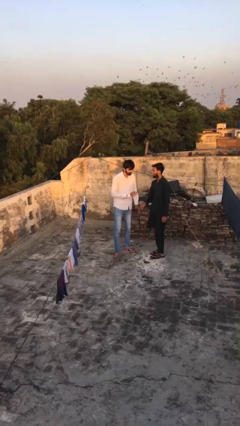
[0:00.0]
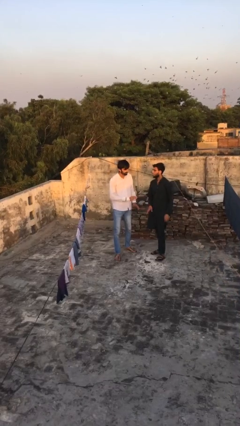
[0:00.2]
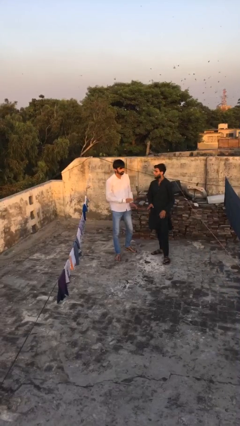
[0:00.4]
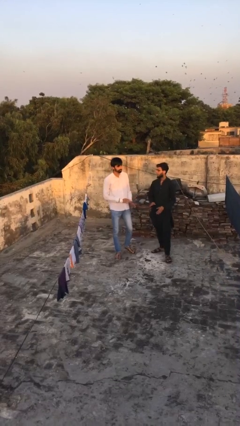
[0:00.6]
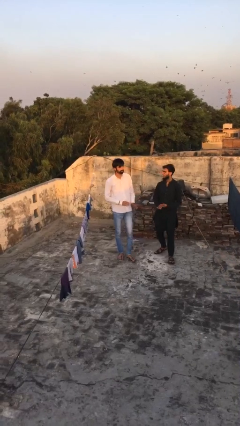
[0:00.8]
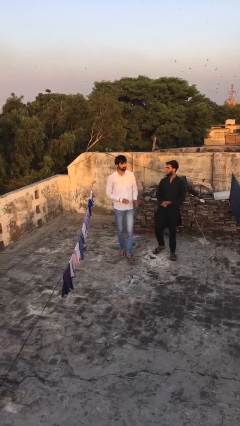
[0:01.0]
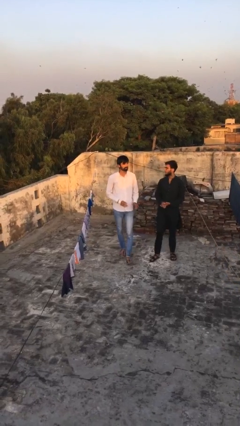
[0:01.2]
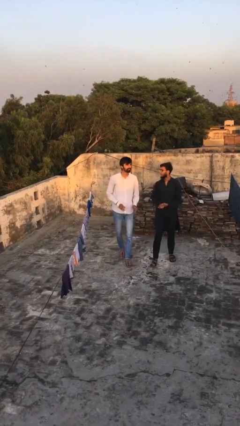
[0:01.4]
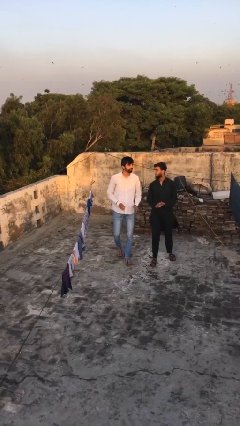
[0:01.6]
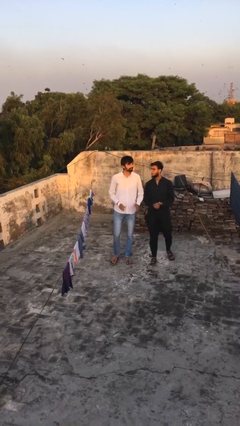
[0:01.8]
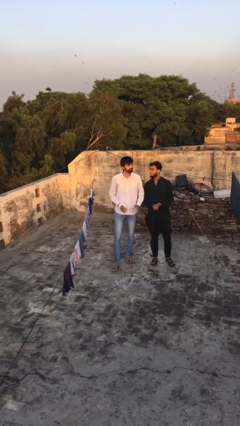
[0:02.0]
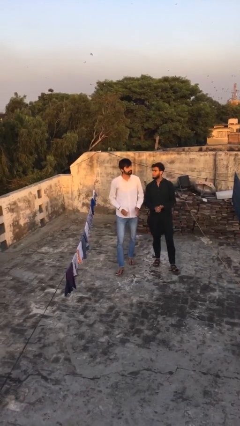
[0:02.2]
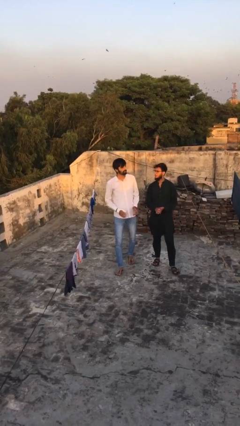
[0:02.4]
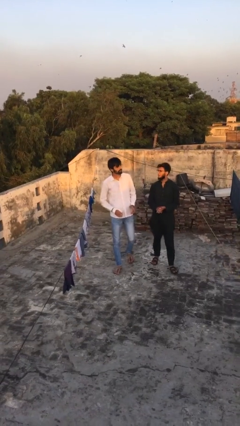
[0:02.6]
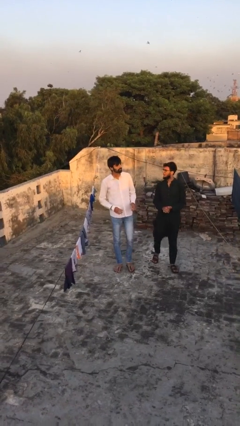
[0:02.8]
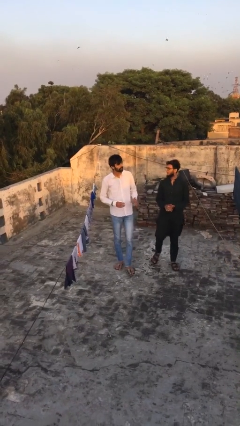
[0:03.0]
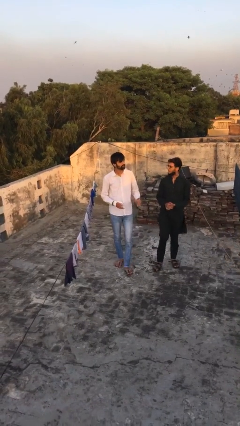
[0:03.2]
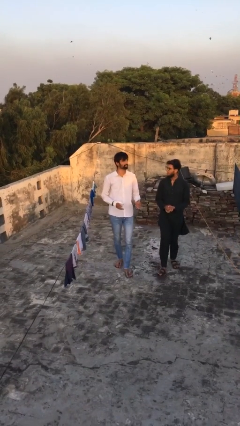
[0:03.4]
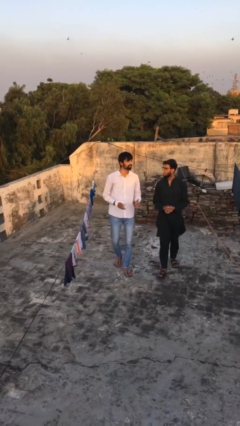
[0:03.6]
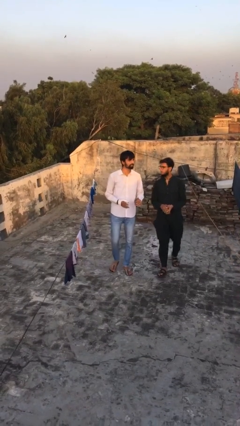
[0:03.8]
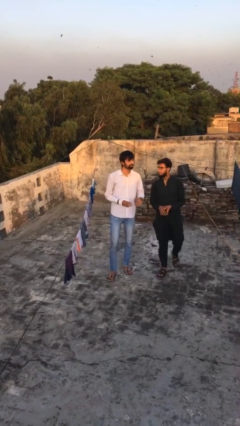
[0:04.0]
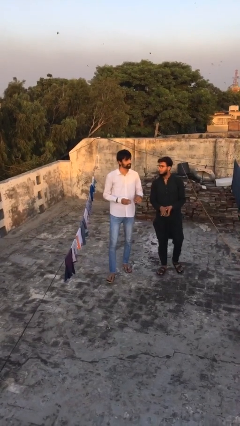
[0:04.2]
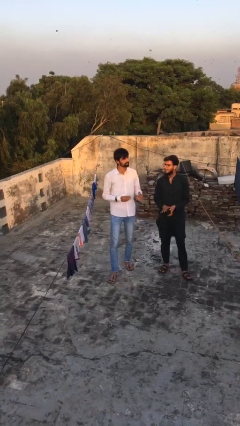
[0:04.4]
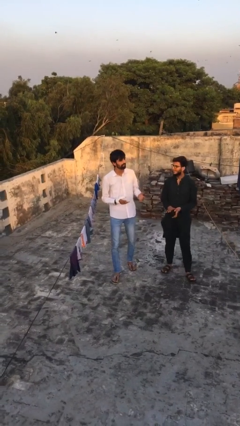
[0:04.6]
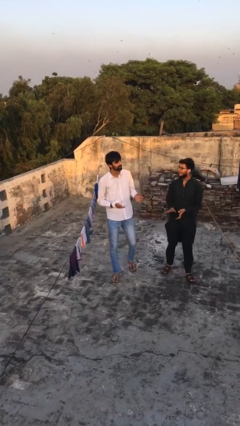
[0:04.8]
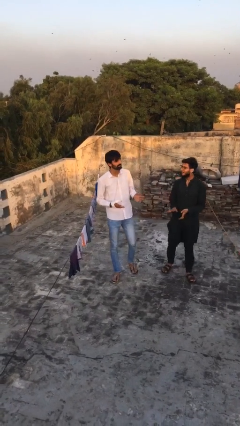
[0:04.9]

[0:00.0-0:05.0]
person talks to person

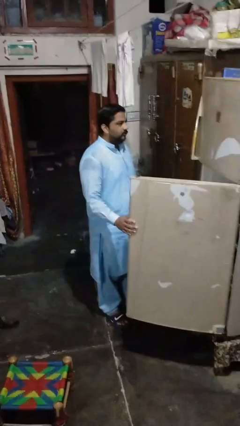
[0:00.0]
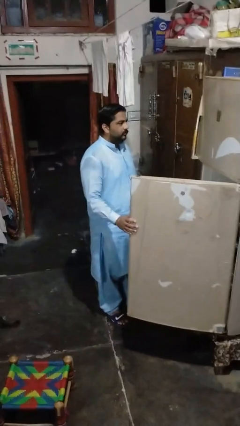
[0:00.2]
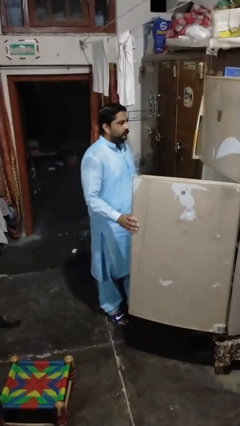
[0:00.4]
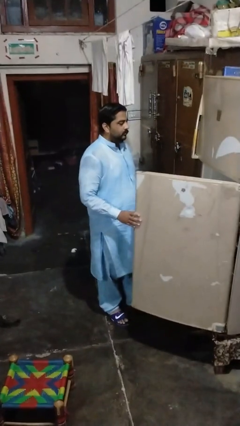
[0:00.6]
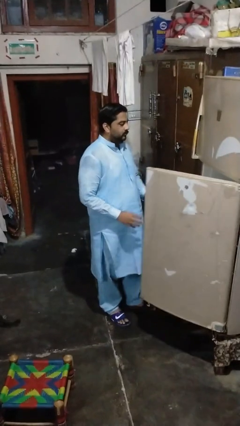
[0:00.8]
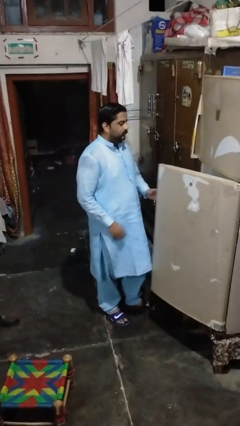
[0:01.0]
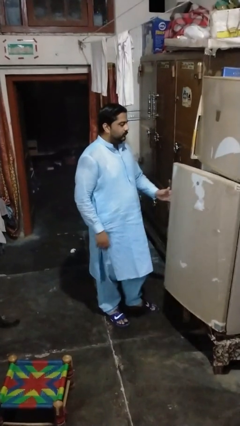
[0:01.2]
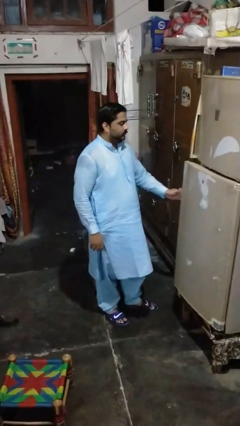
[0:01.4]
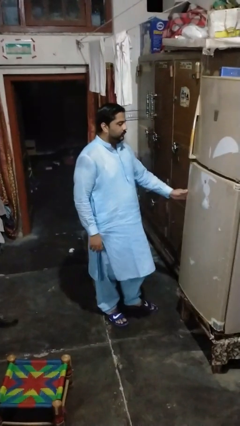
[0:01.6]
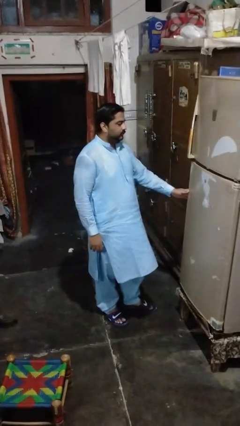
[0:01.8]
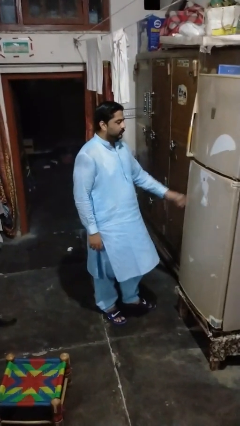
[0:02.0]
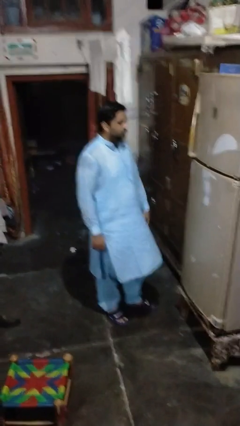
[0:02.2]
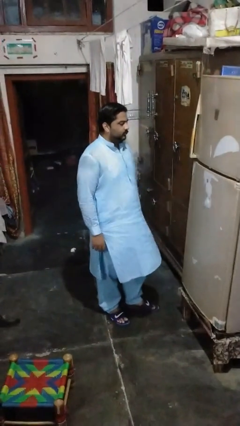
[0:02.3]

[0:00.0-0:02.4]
person closes refrigerator

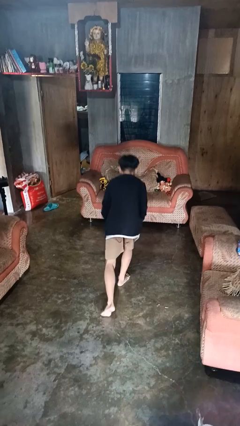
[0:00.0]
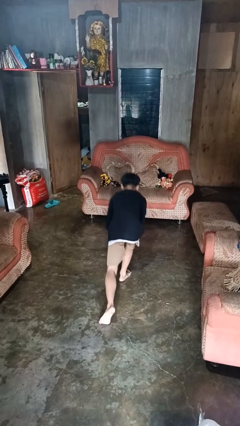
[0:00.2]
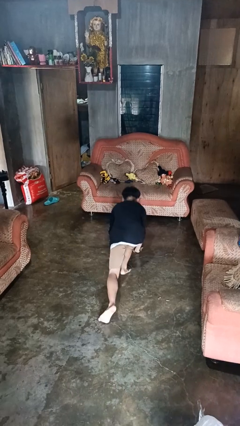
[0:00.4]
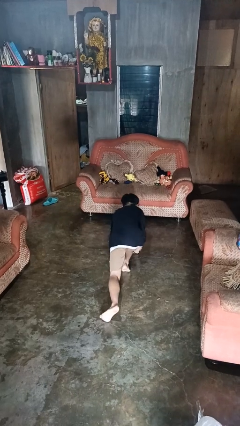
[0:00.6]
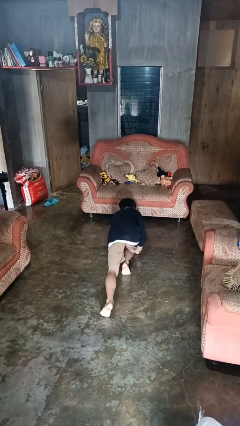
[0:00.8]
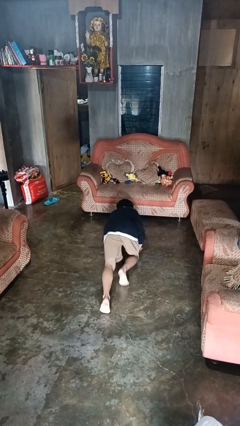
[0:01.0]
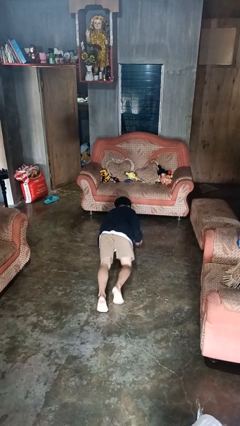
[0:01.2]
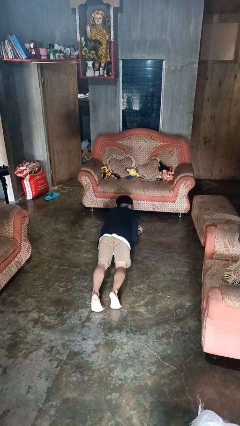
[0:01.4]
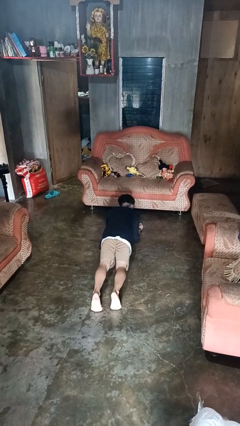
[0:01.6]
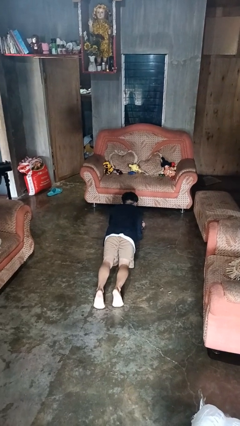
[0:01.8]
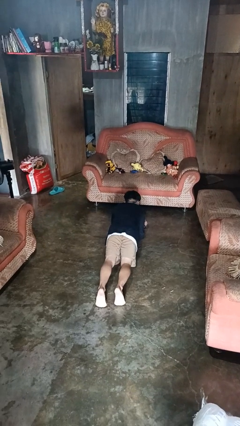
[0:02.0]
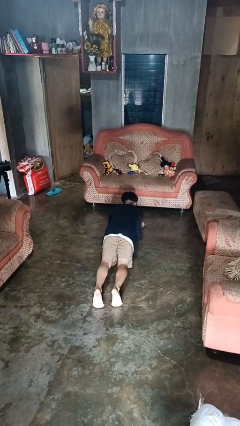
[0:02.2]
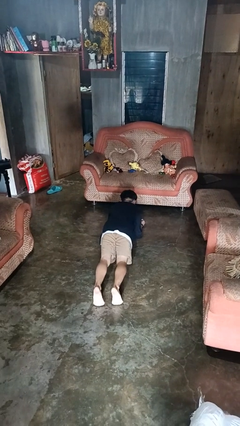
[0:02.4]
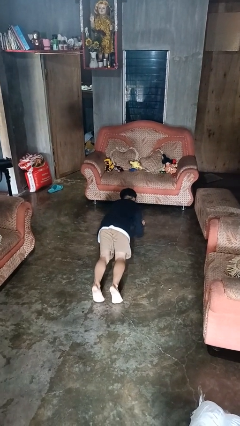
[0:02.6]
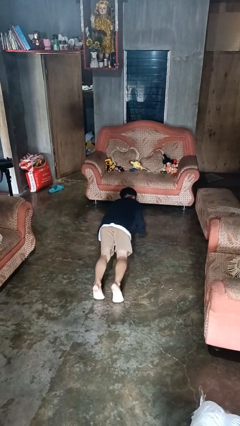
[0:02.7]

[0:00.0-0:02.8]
person exercises with plank

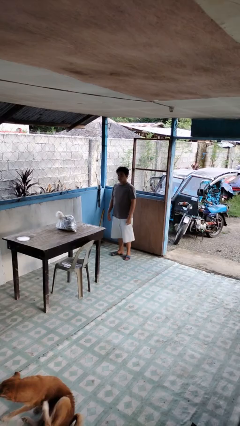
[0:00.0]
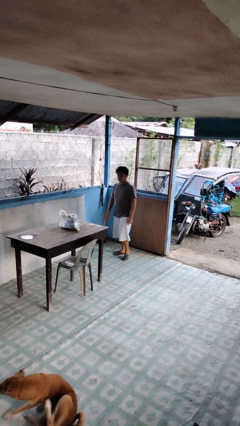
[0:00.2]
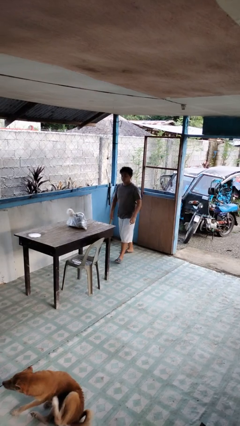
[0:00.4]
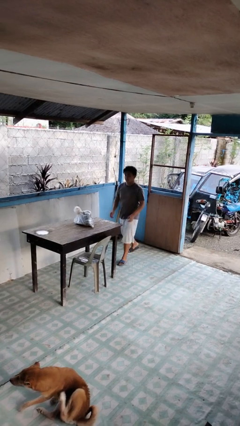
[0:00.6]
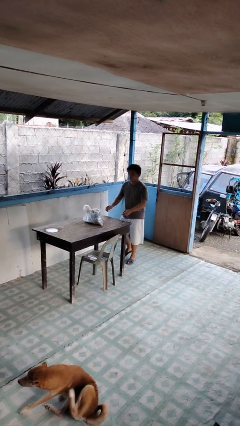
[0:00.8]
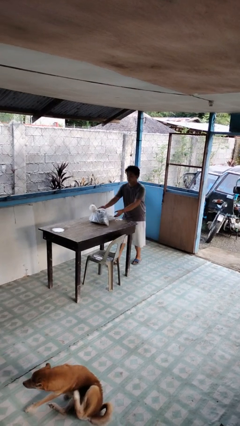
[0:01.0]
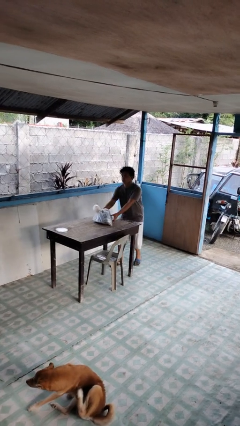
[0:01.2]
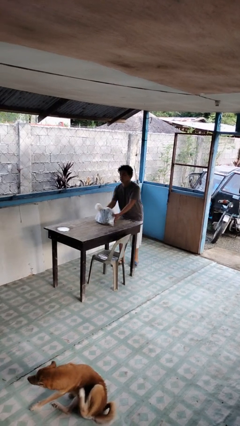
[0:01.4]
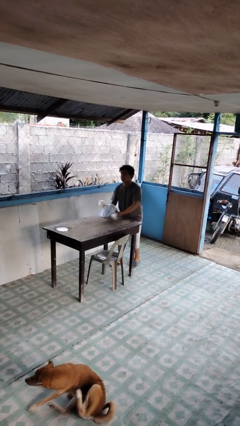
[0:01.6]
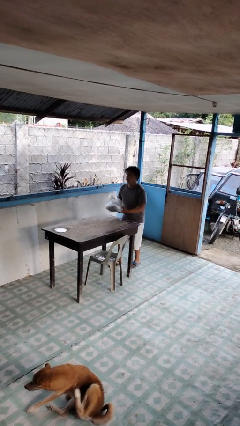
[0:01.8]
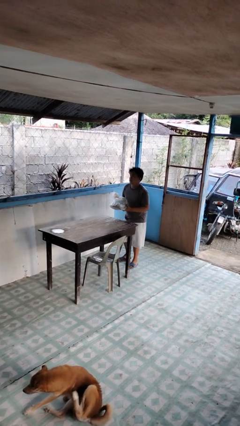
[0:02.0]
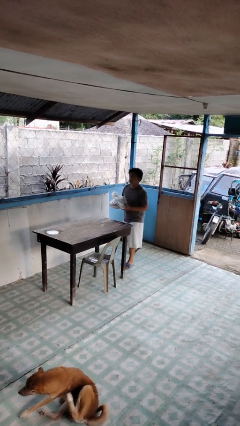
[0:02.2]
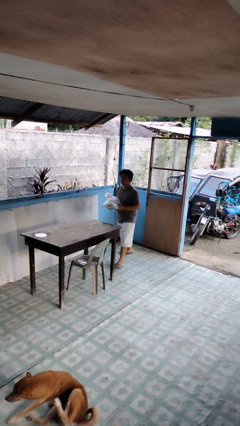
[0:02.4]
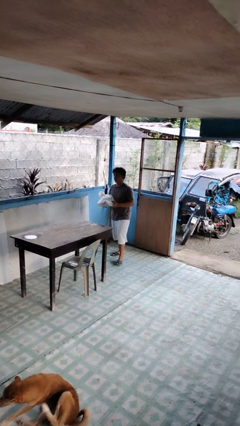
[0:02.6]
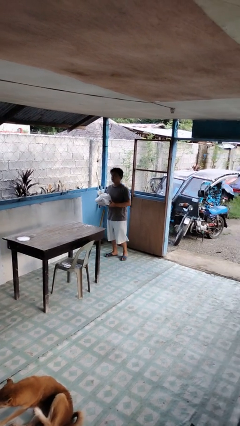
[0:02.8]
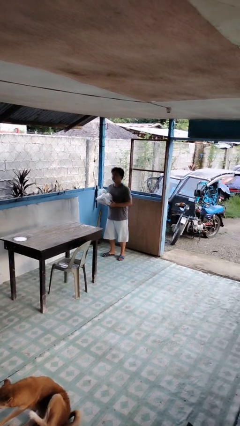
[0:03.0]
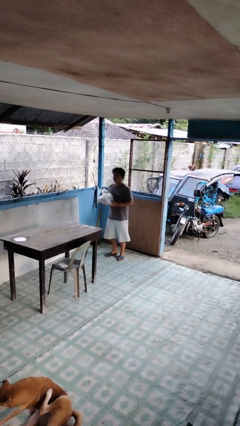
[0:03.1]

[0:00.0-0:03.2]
person picks up object from table

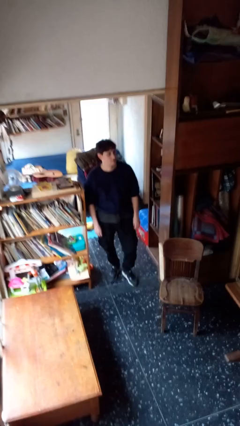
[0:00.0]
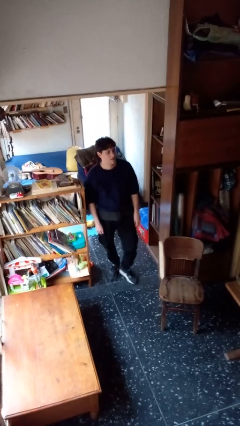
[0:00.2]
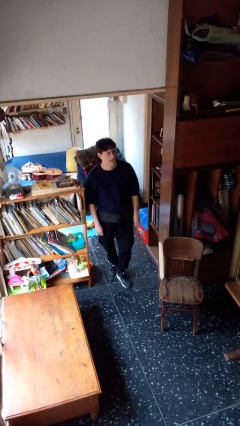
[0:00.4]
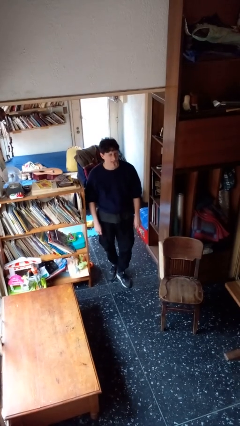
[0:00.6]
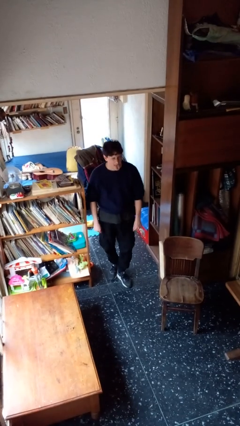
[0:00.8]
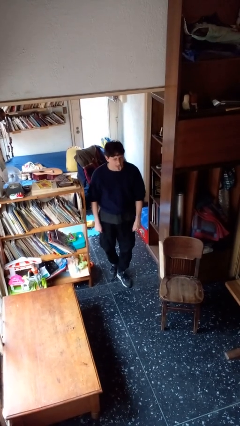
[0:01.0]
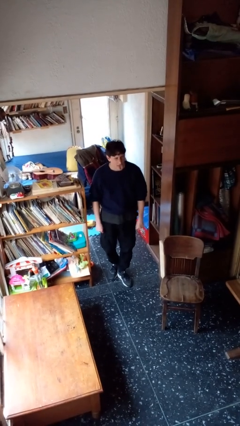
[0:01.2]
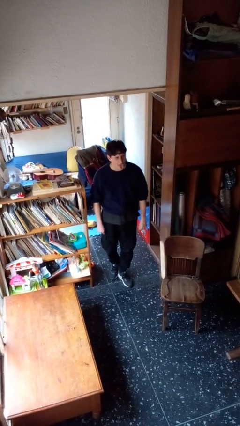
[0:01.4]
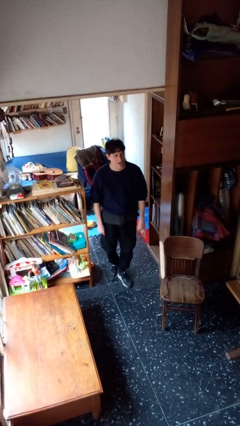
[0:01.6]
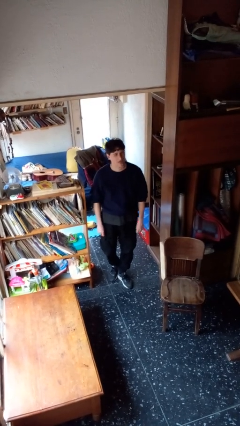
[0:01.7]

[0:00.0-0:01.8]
person sticks out tongue

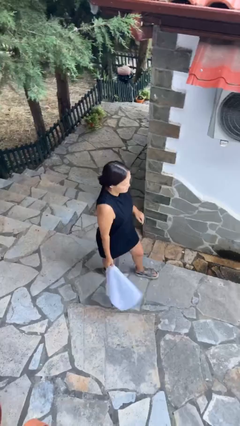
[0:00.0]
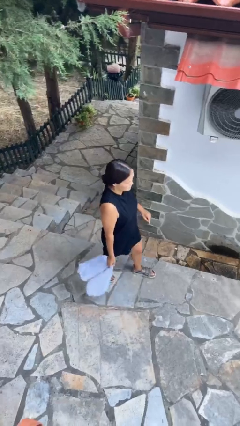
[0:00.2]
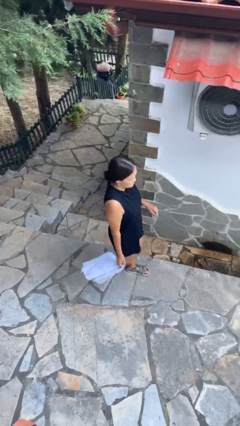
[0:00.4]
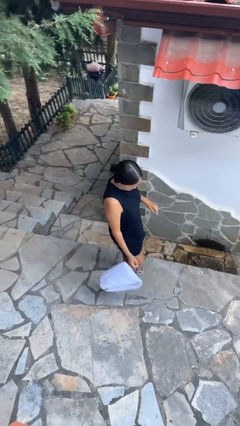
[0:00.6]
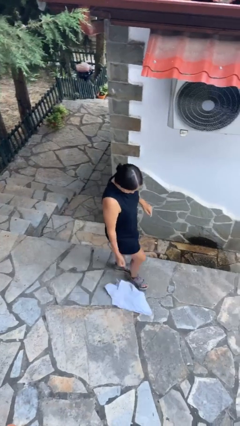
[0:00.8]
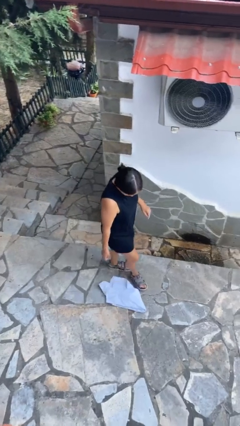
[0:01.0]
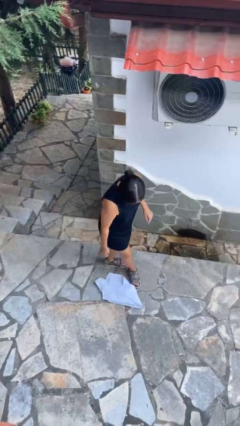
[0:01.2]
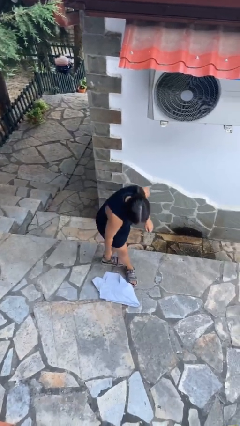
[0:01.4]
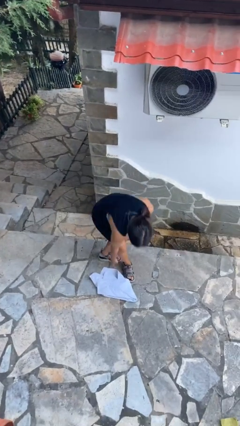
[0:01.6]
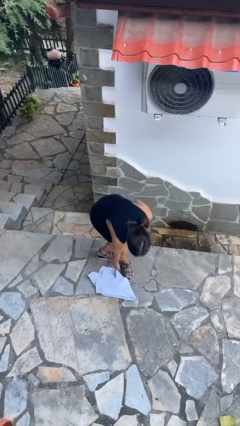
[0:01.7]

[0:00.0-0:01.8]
person drops object

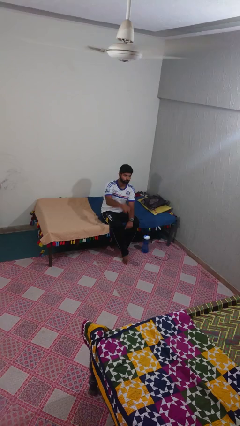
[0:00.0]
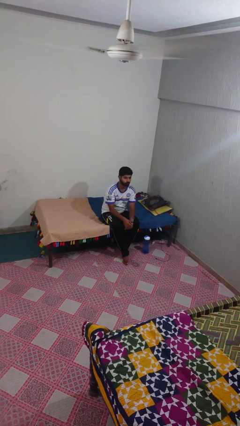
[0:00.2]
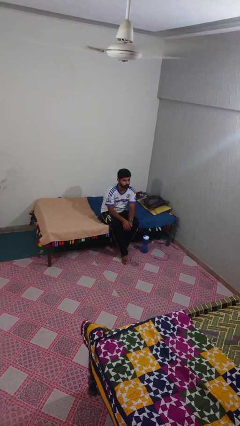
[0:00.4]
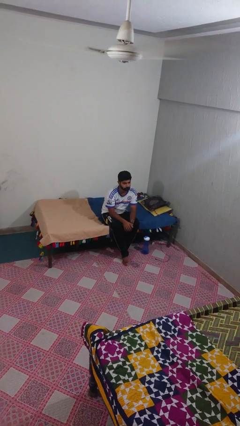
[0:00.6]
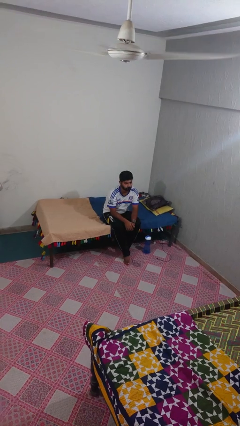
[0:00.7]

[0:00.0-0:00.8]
person gestures lower hand
